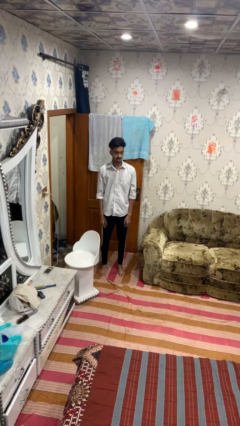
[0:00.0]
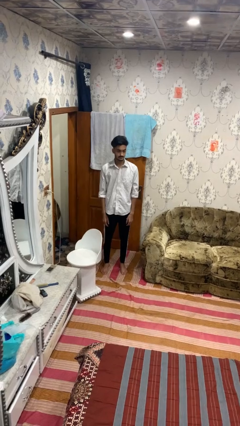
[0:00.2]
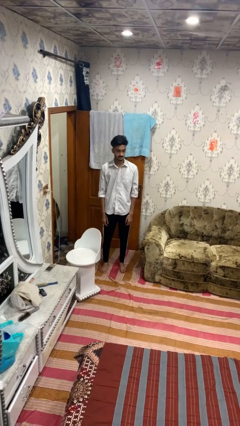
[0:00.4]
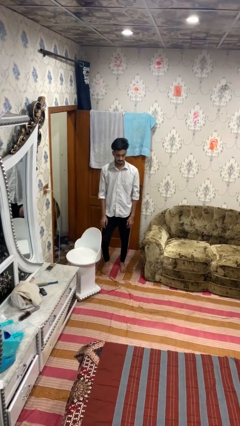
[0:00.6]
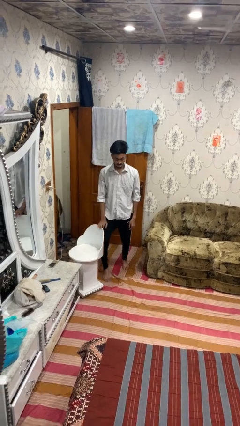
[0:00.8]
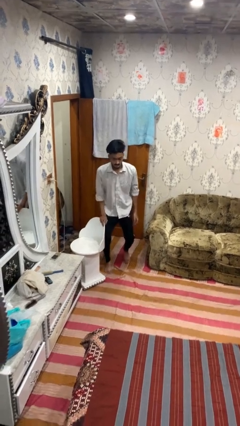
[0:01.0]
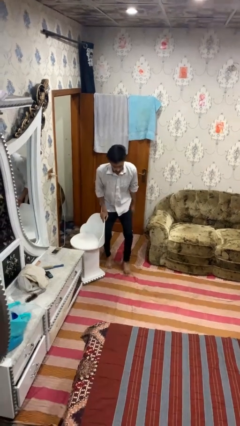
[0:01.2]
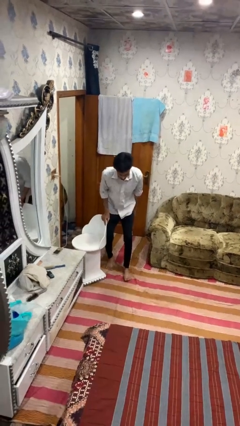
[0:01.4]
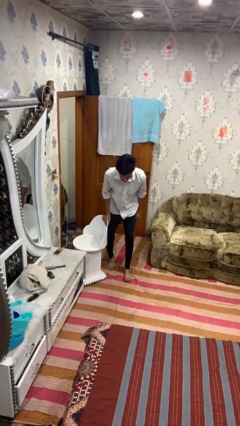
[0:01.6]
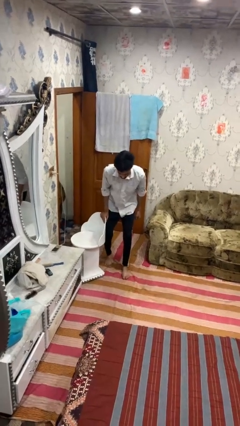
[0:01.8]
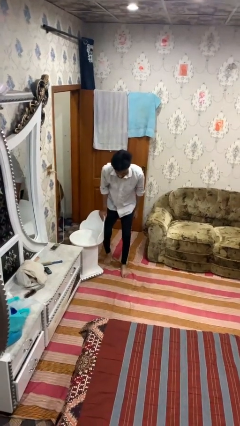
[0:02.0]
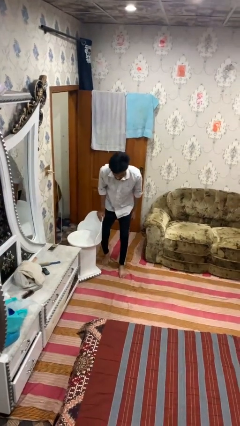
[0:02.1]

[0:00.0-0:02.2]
person trips on object on floor

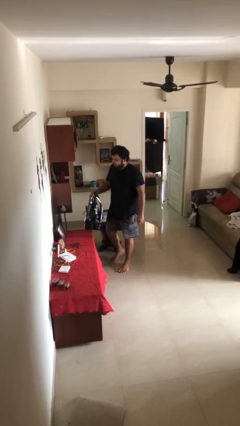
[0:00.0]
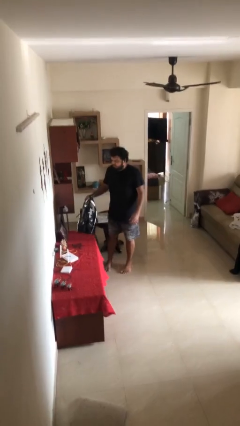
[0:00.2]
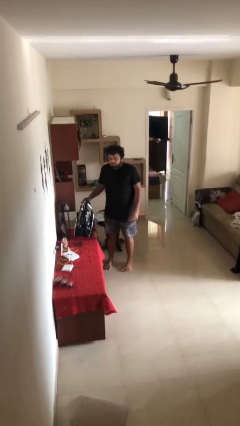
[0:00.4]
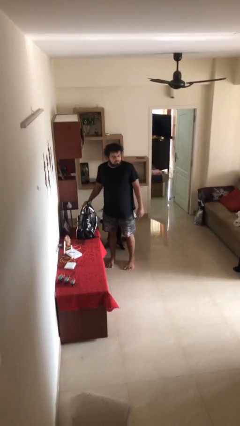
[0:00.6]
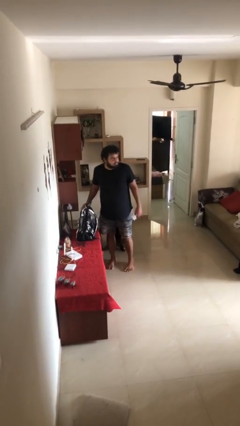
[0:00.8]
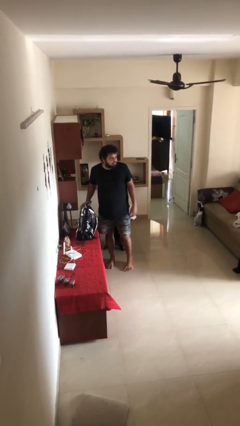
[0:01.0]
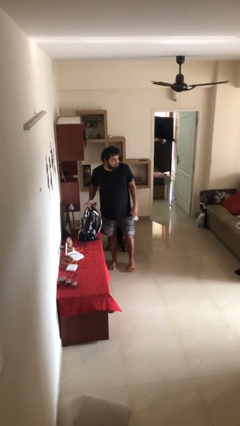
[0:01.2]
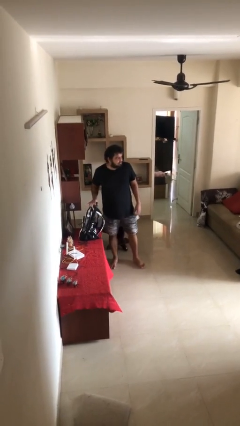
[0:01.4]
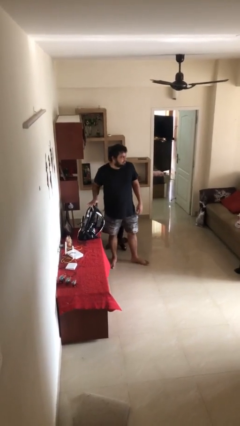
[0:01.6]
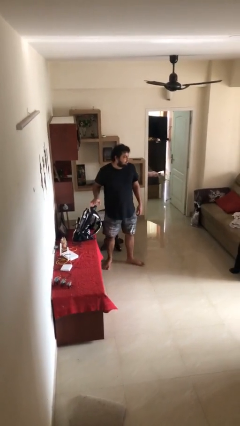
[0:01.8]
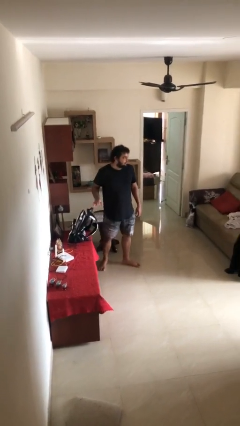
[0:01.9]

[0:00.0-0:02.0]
person puts down object on table

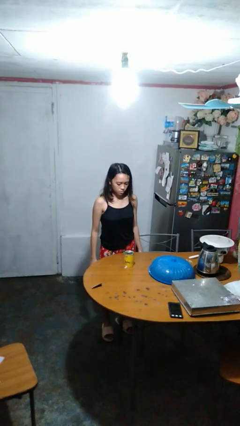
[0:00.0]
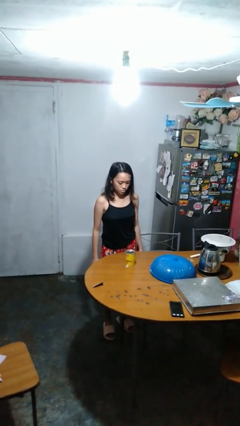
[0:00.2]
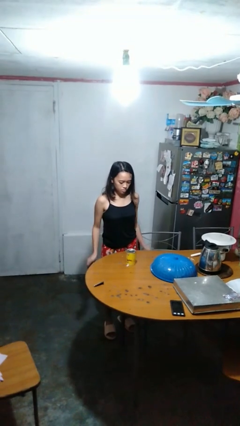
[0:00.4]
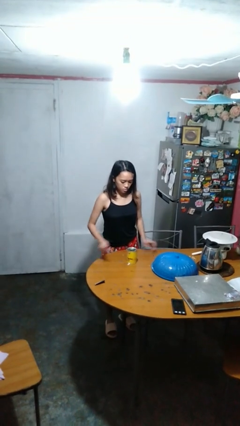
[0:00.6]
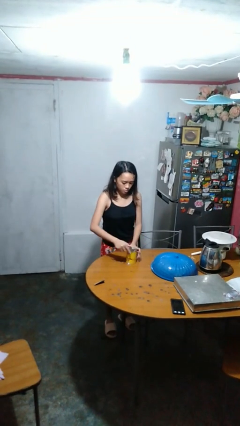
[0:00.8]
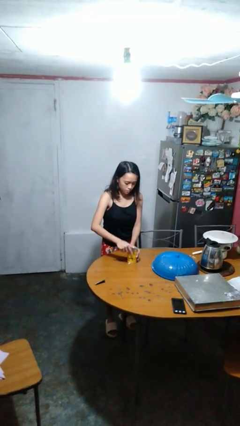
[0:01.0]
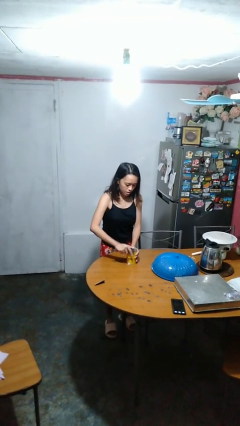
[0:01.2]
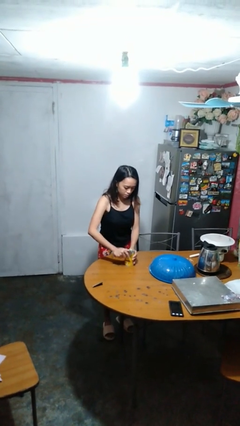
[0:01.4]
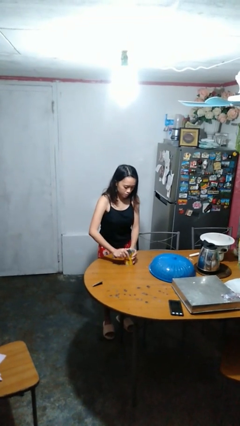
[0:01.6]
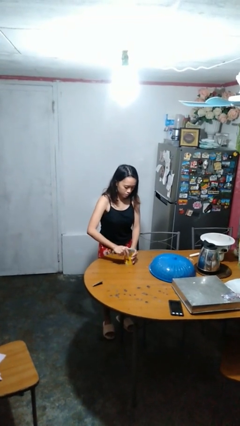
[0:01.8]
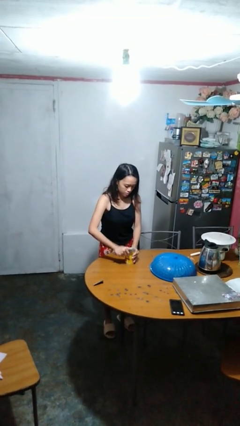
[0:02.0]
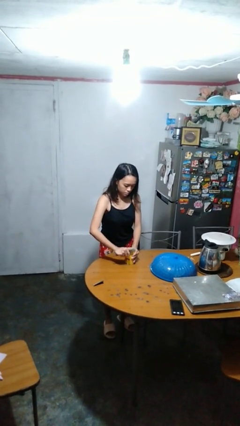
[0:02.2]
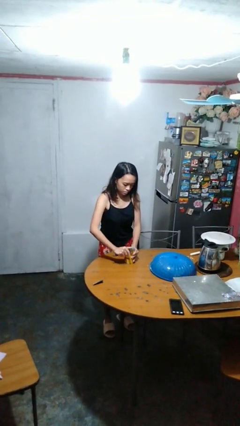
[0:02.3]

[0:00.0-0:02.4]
person opens can with can opener

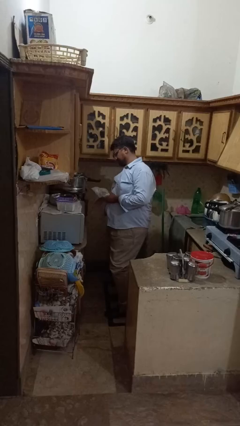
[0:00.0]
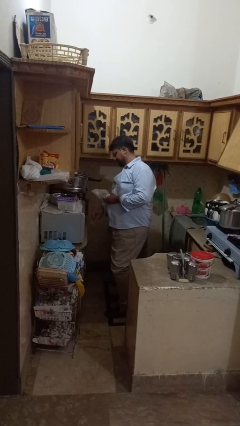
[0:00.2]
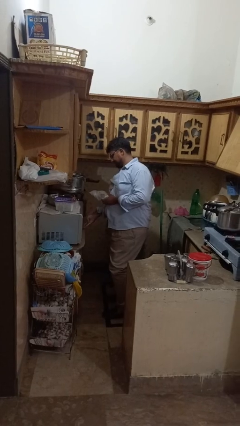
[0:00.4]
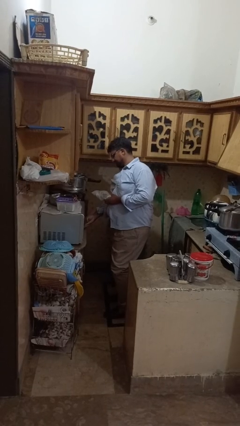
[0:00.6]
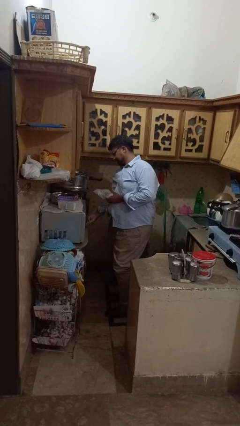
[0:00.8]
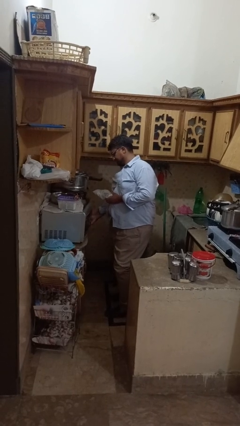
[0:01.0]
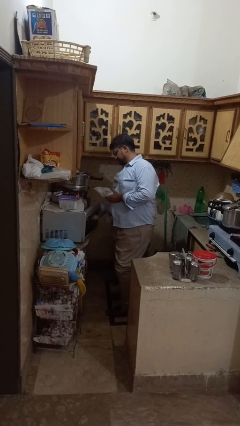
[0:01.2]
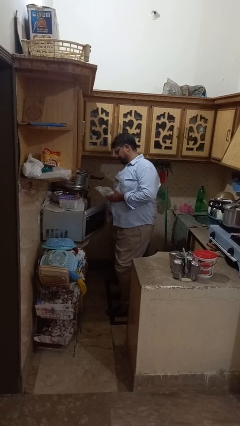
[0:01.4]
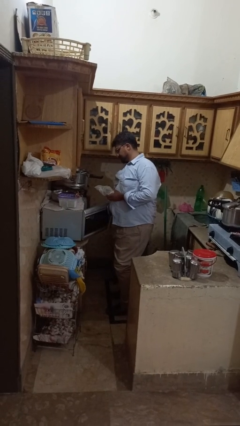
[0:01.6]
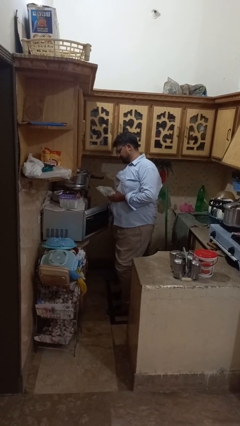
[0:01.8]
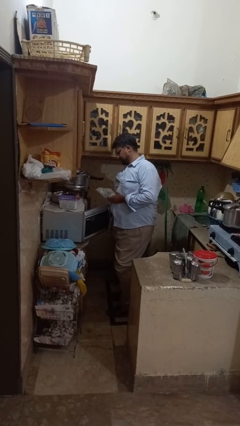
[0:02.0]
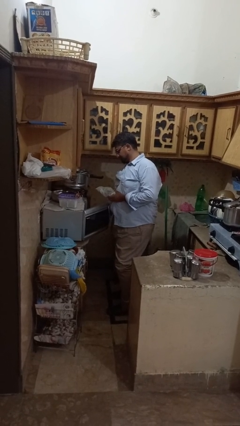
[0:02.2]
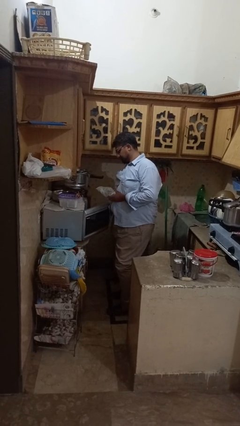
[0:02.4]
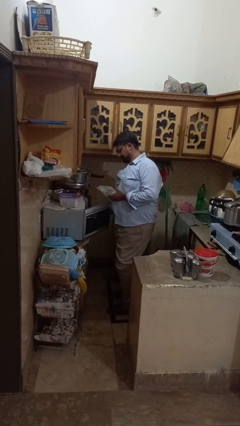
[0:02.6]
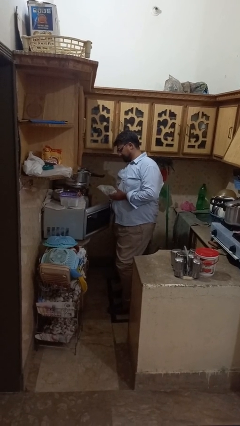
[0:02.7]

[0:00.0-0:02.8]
person opens microwave

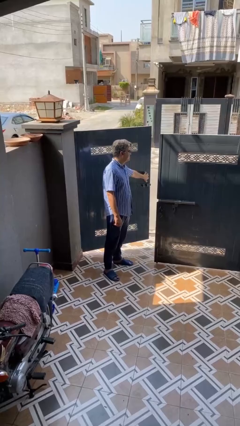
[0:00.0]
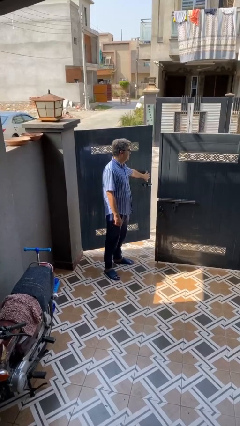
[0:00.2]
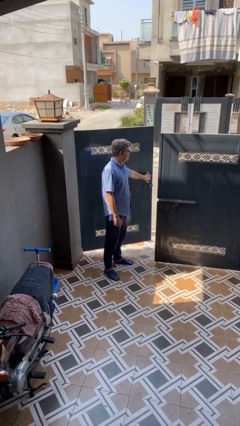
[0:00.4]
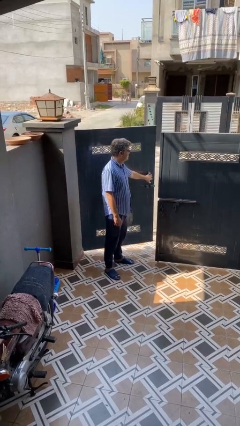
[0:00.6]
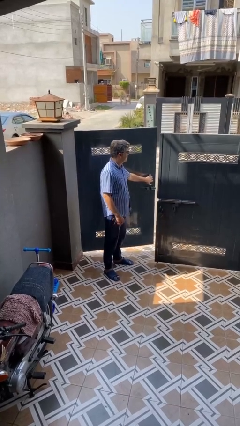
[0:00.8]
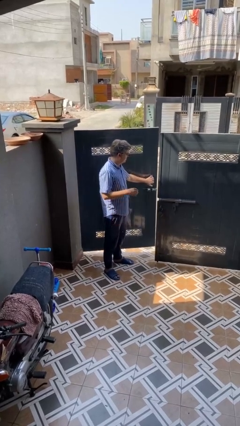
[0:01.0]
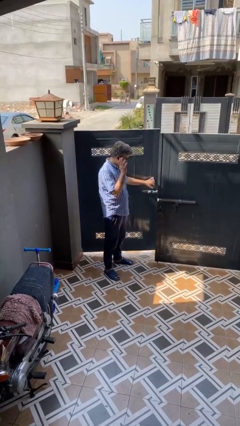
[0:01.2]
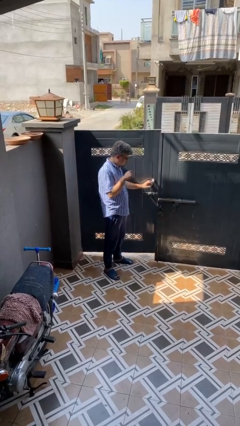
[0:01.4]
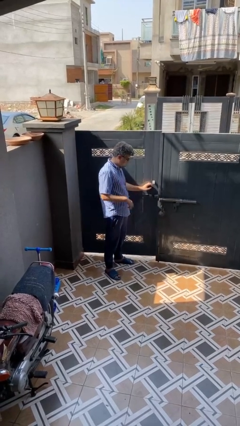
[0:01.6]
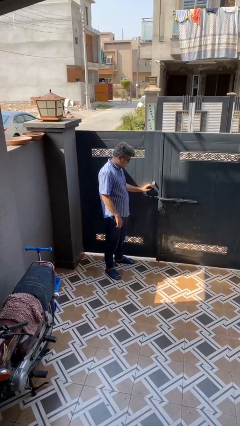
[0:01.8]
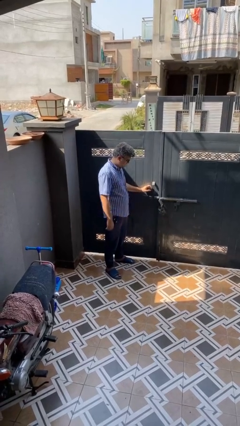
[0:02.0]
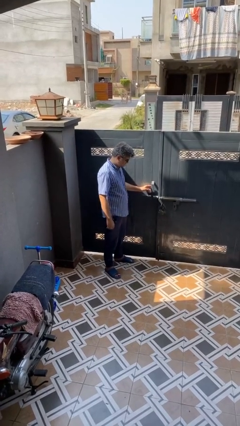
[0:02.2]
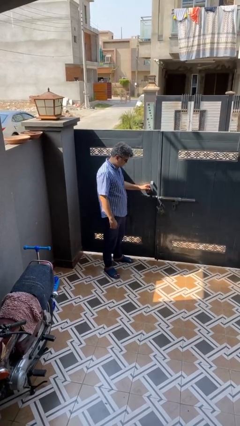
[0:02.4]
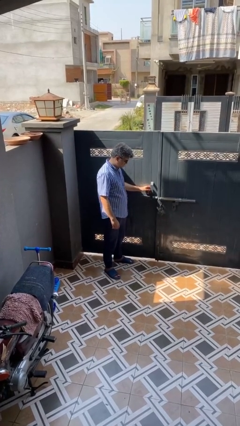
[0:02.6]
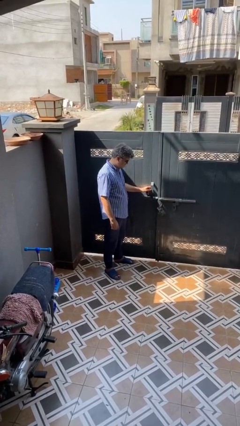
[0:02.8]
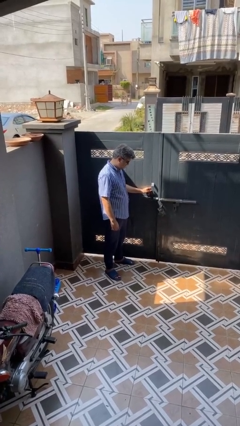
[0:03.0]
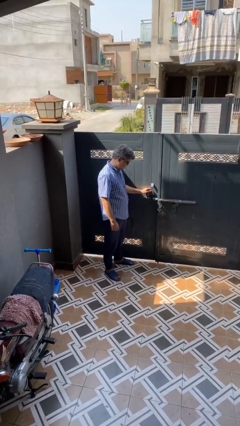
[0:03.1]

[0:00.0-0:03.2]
person closes gate

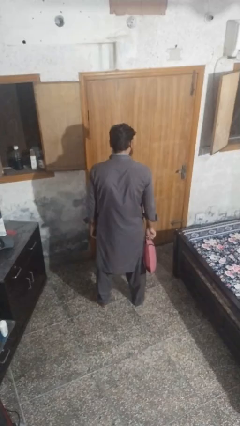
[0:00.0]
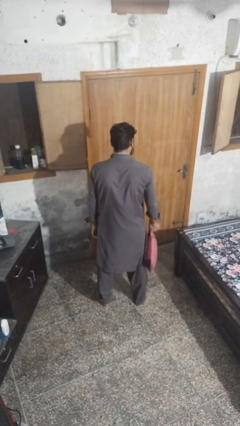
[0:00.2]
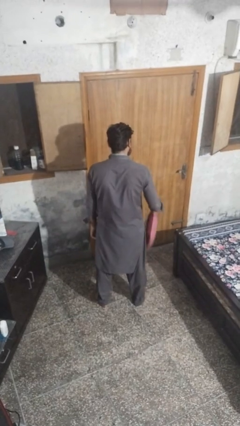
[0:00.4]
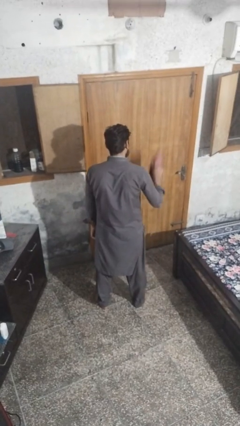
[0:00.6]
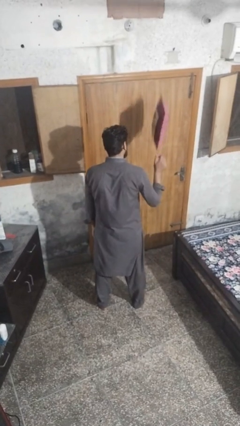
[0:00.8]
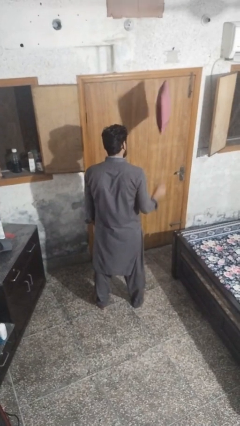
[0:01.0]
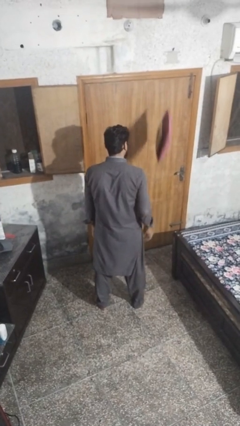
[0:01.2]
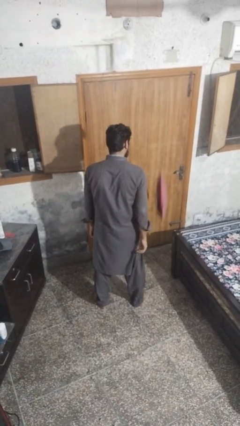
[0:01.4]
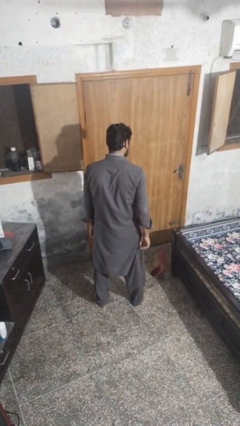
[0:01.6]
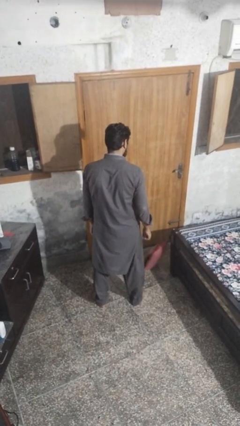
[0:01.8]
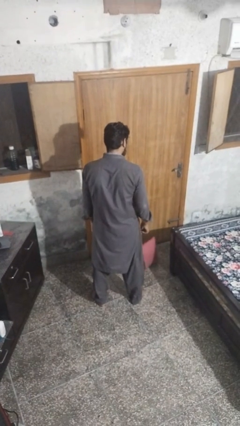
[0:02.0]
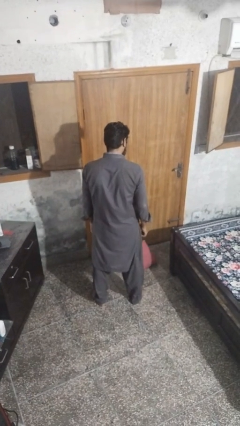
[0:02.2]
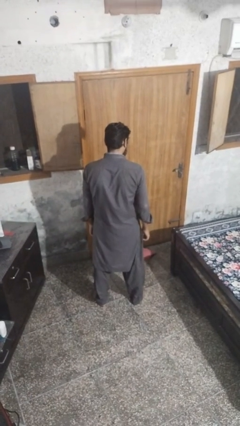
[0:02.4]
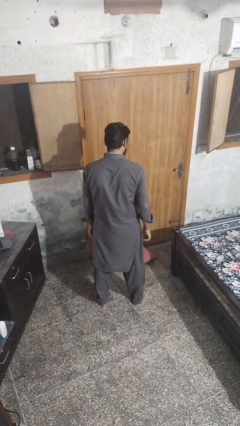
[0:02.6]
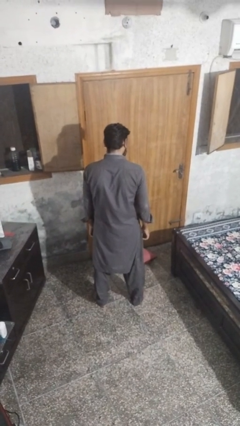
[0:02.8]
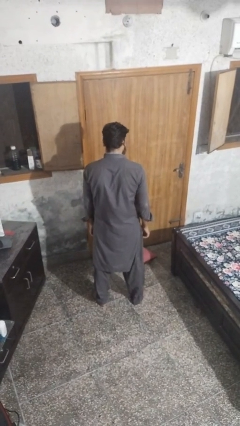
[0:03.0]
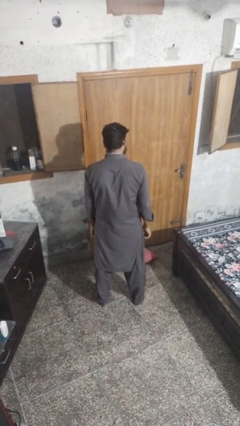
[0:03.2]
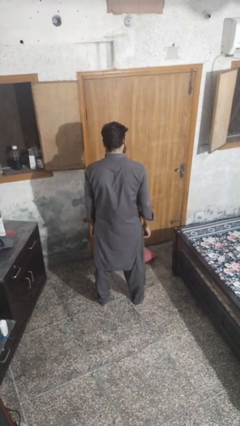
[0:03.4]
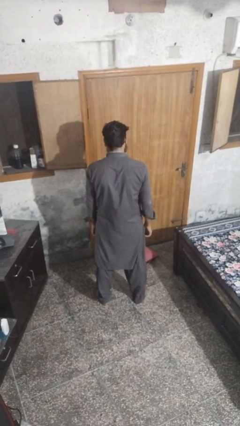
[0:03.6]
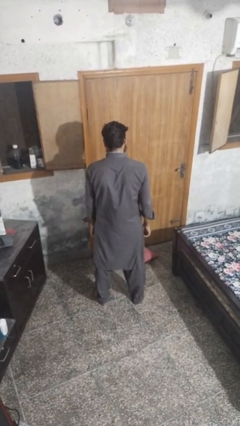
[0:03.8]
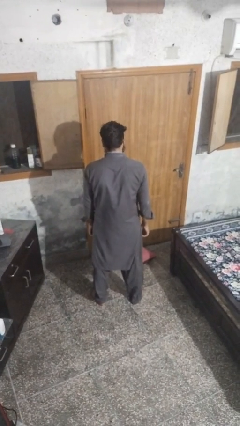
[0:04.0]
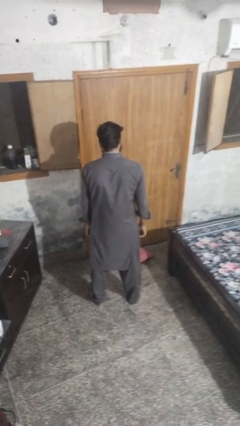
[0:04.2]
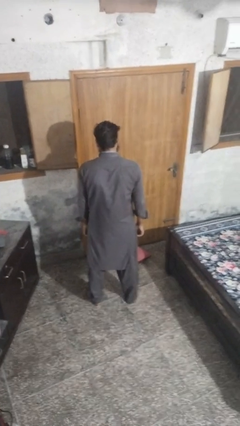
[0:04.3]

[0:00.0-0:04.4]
person throws object into air
